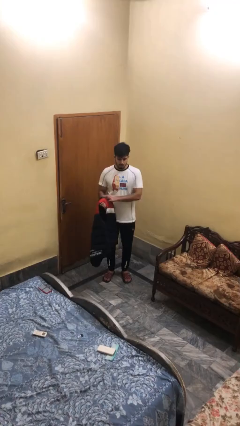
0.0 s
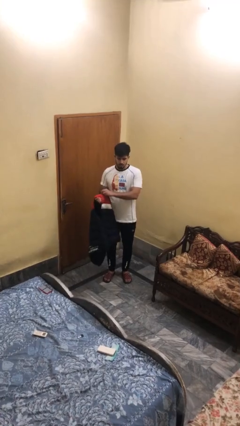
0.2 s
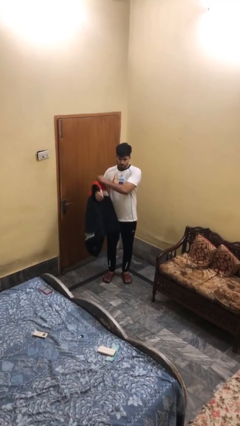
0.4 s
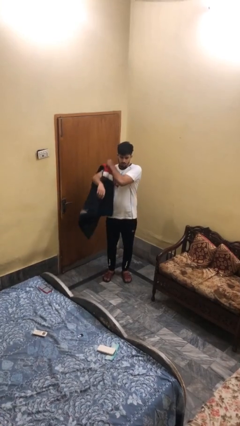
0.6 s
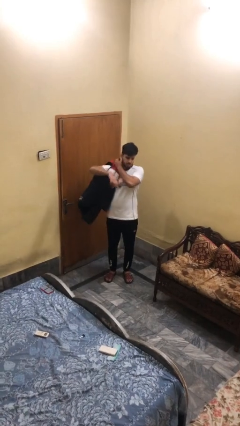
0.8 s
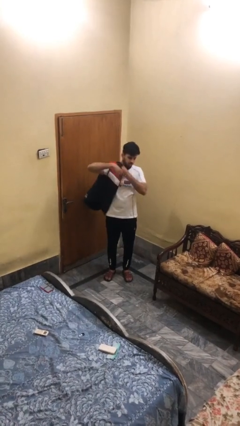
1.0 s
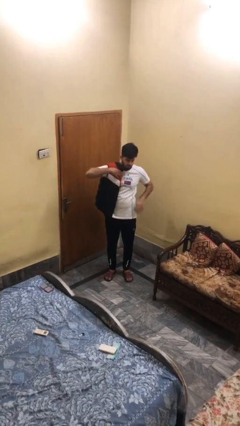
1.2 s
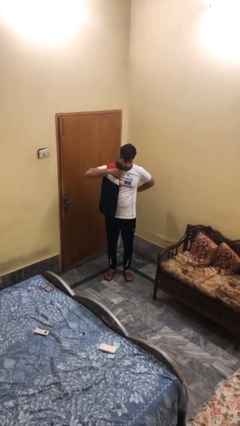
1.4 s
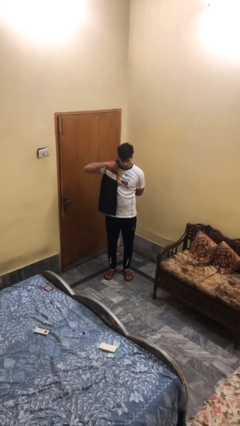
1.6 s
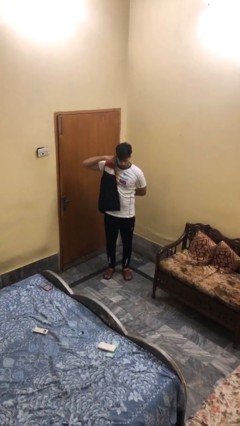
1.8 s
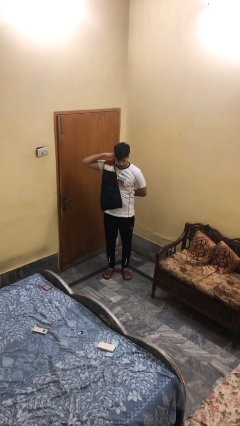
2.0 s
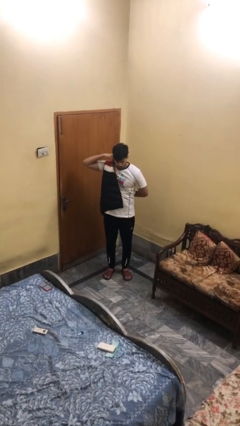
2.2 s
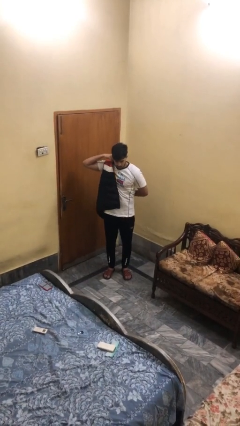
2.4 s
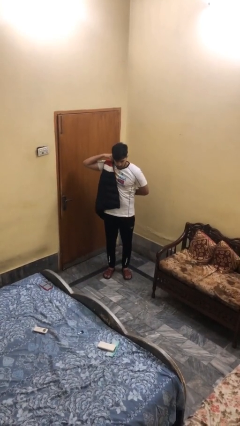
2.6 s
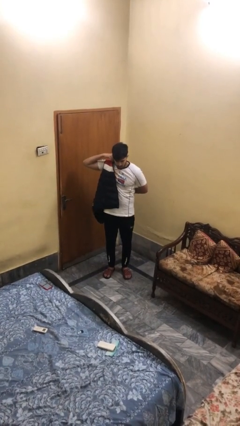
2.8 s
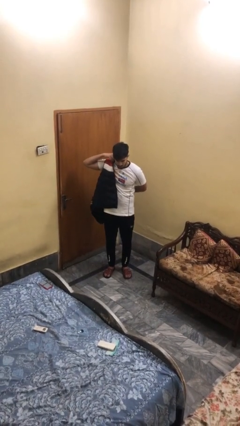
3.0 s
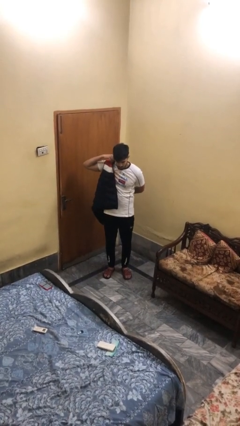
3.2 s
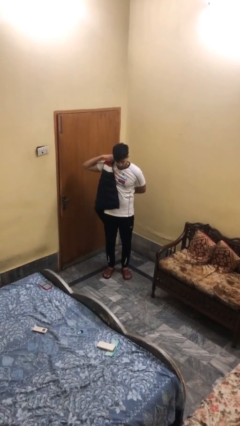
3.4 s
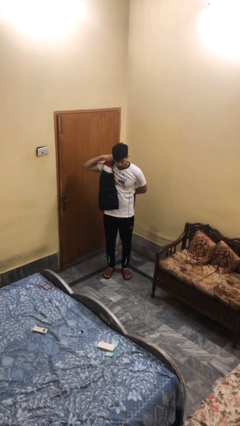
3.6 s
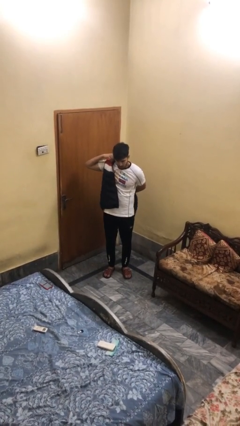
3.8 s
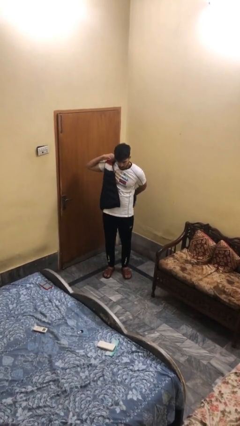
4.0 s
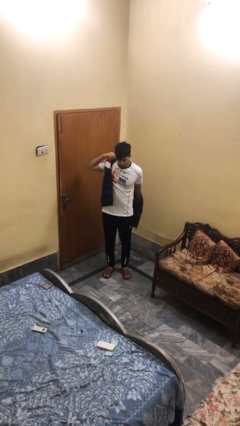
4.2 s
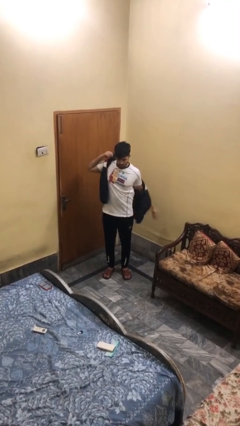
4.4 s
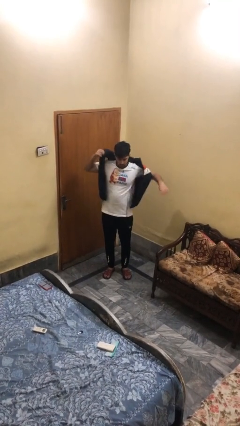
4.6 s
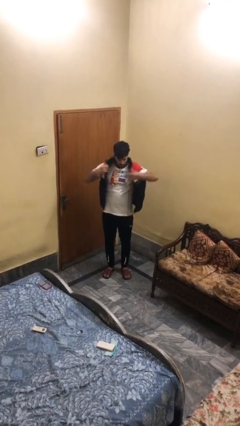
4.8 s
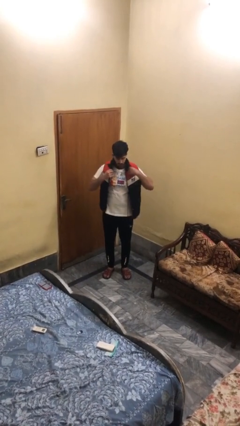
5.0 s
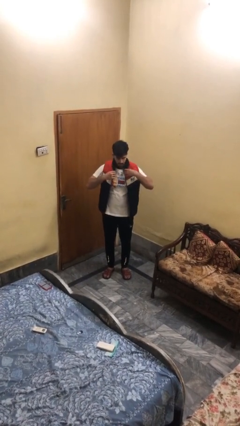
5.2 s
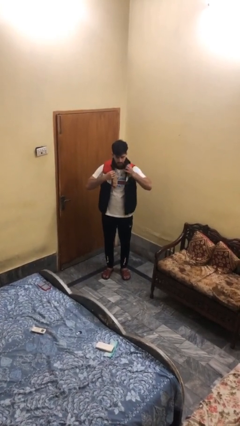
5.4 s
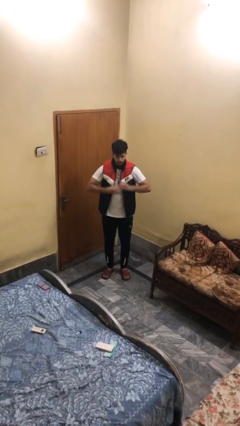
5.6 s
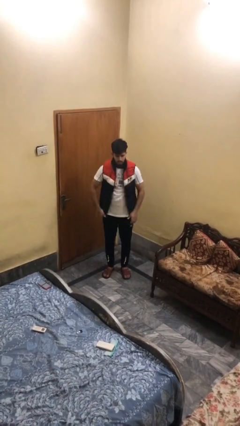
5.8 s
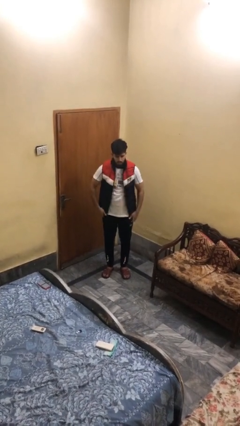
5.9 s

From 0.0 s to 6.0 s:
person puts on jacket

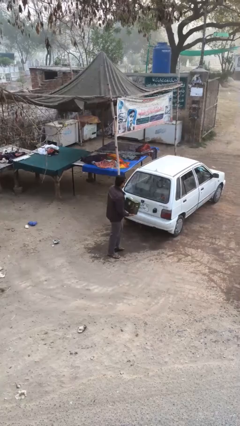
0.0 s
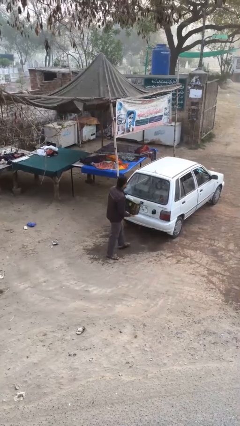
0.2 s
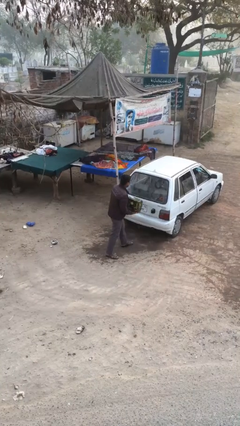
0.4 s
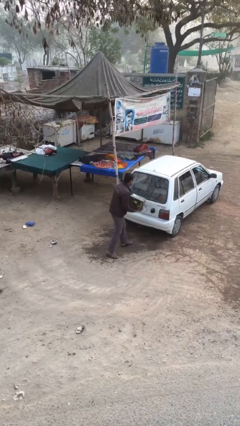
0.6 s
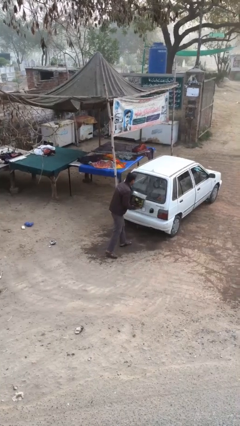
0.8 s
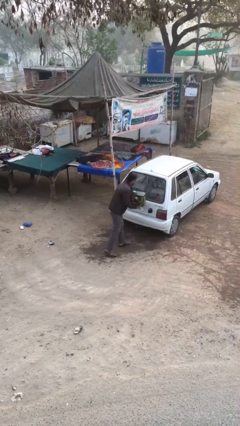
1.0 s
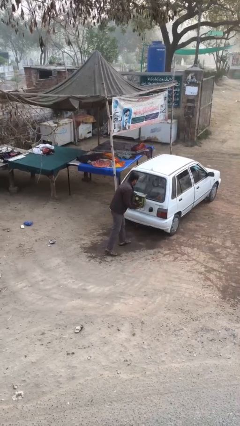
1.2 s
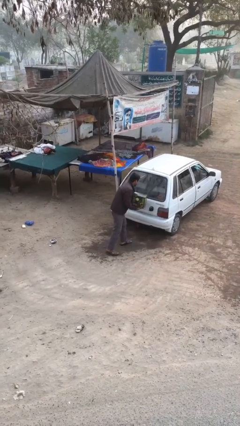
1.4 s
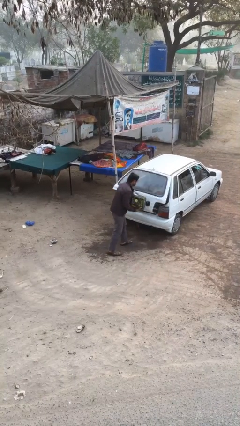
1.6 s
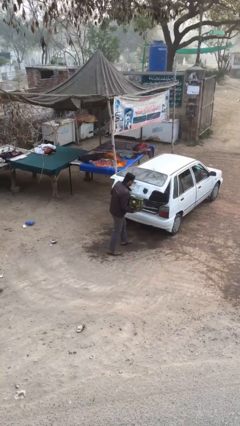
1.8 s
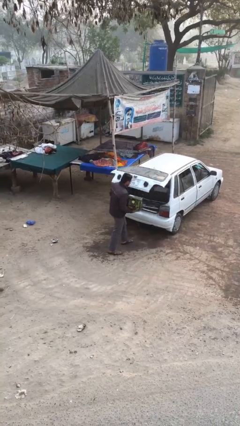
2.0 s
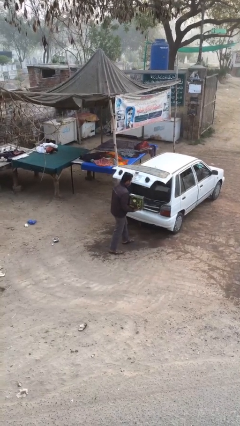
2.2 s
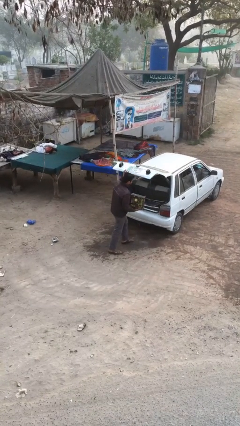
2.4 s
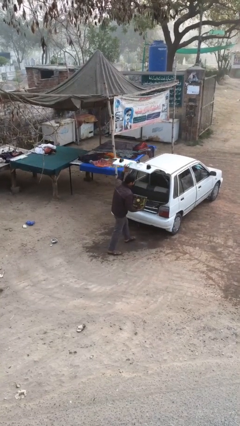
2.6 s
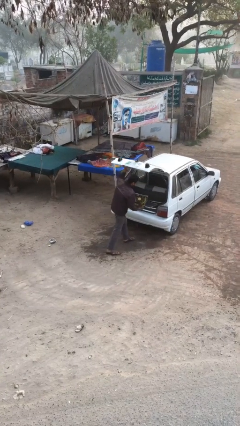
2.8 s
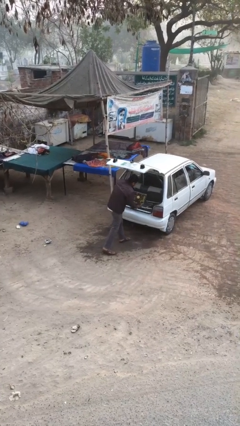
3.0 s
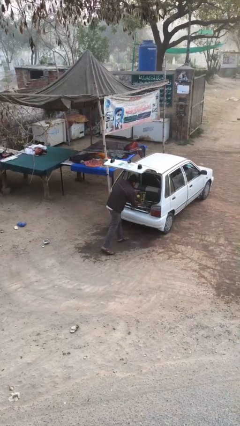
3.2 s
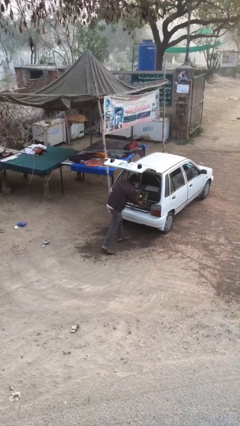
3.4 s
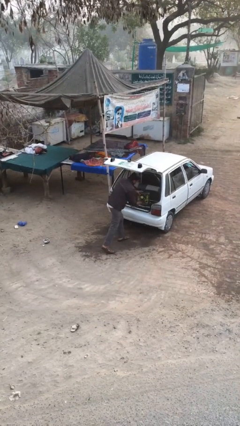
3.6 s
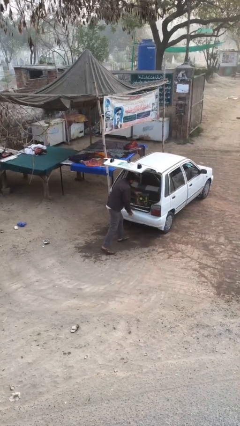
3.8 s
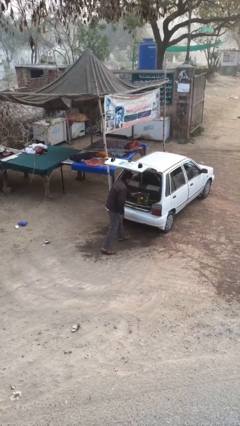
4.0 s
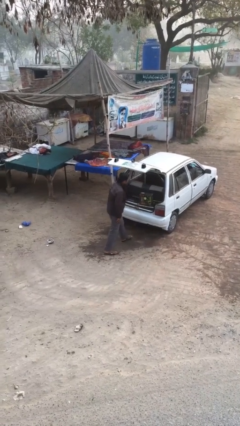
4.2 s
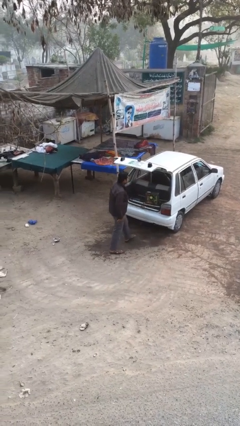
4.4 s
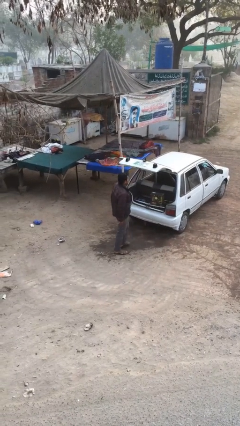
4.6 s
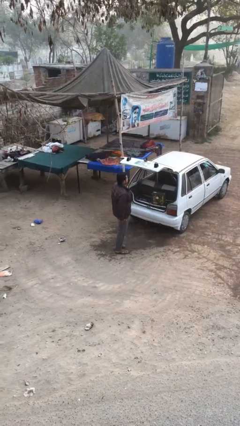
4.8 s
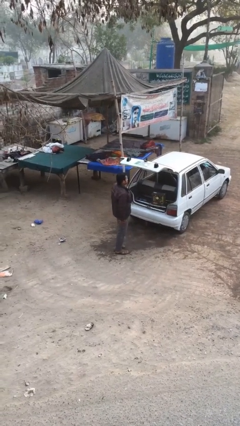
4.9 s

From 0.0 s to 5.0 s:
person loads car

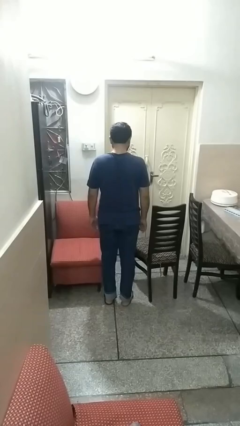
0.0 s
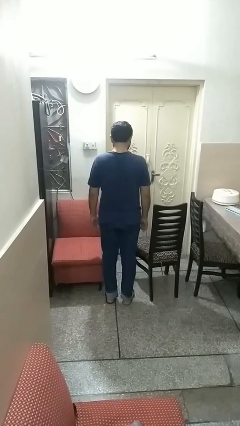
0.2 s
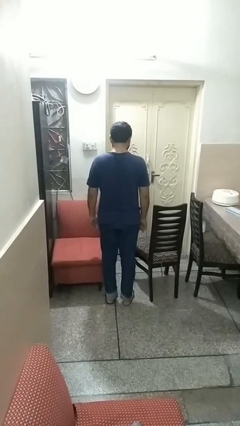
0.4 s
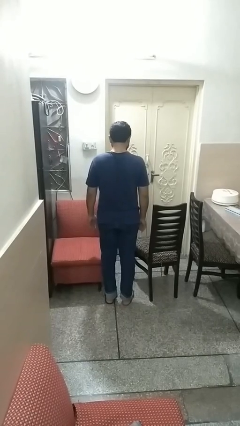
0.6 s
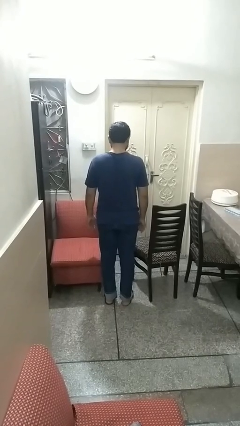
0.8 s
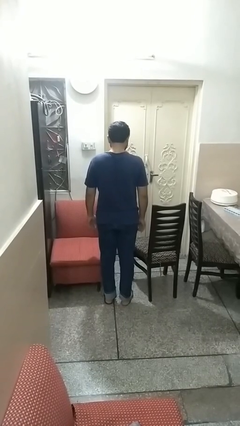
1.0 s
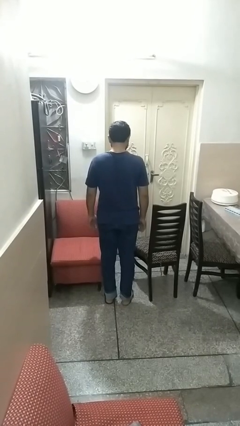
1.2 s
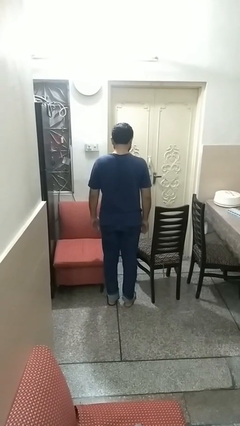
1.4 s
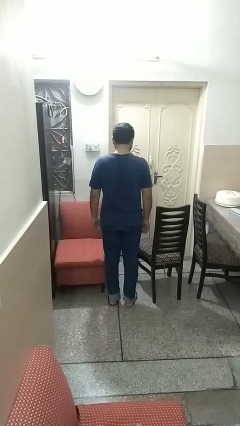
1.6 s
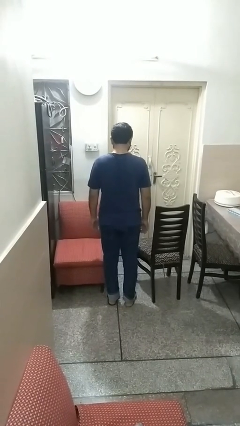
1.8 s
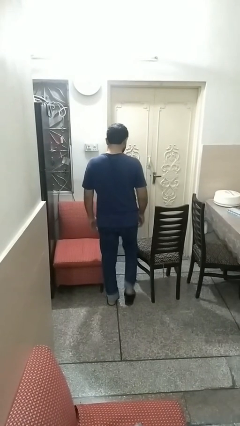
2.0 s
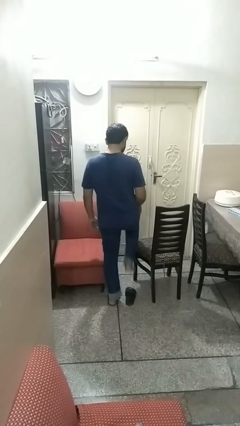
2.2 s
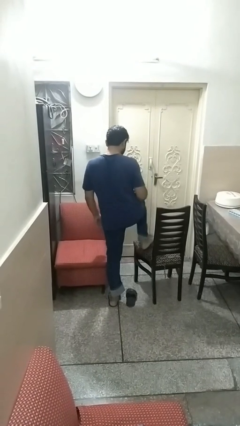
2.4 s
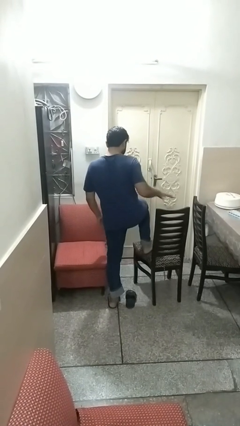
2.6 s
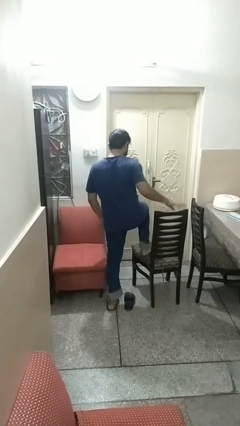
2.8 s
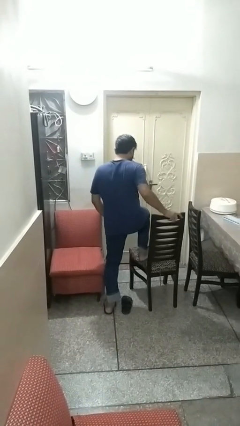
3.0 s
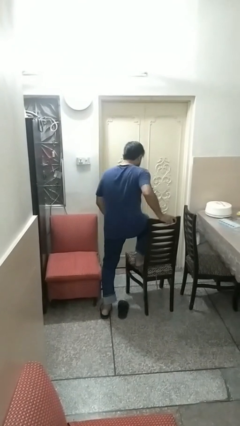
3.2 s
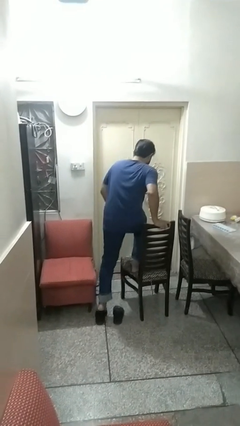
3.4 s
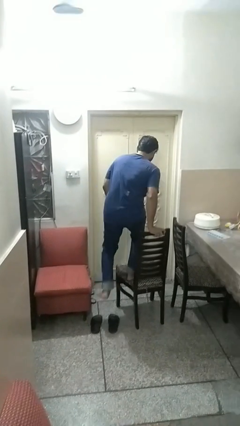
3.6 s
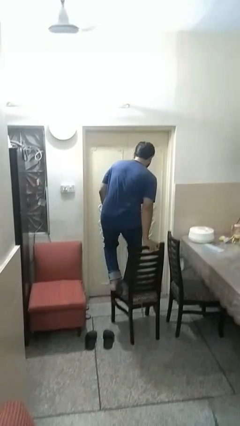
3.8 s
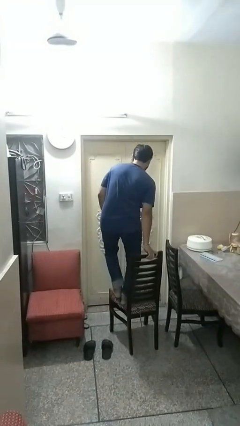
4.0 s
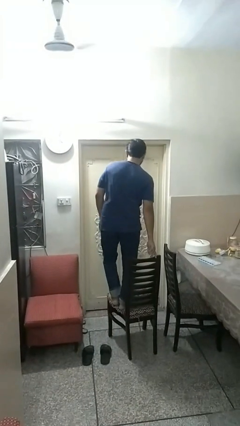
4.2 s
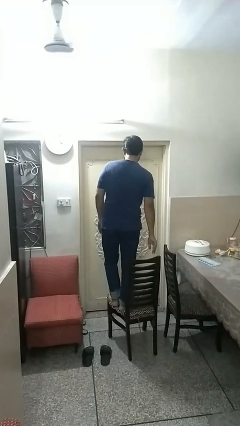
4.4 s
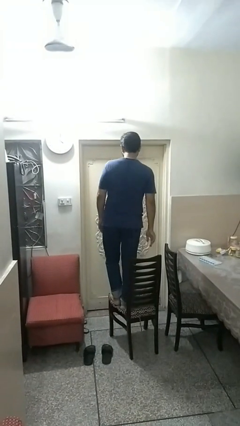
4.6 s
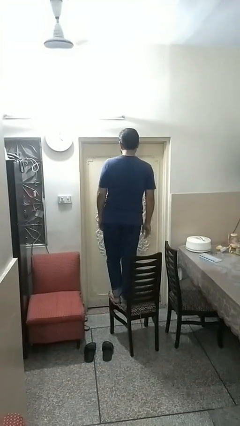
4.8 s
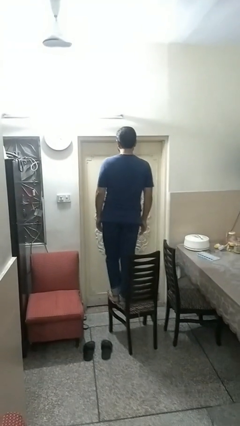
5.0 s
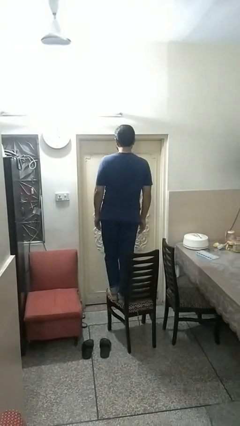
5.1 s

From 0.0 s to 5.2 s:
person climbs on chair

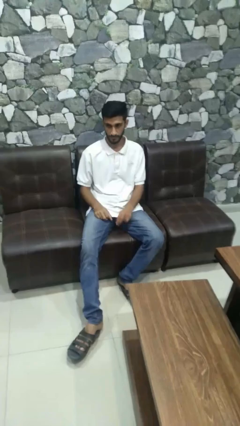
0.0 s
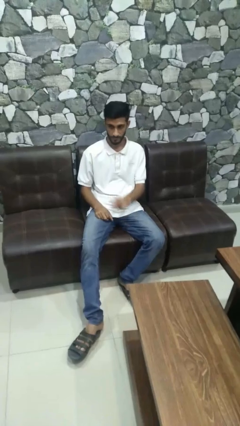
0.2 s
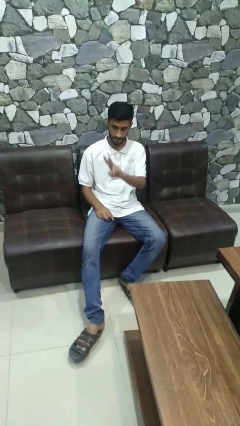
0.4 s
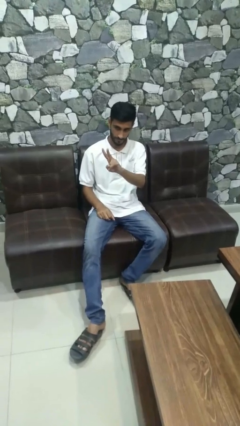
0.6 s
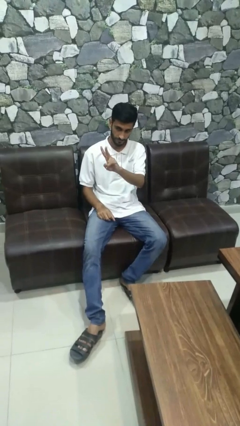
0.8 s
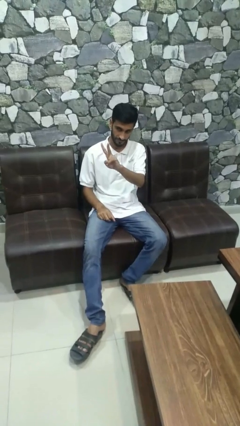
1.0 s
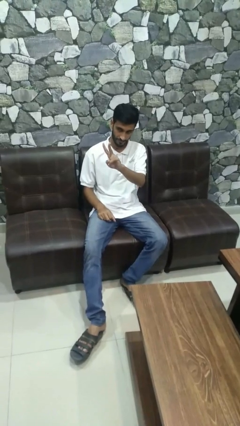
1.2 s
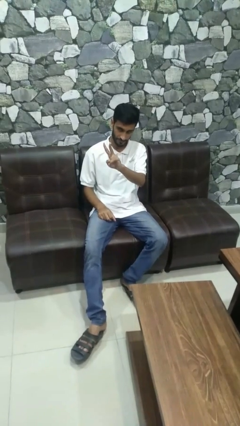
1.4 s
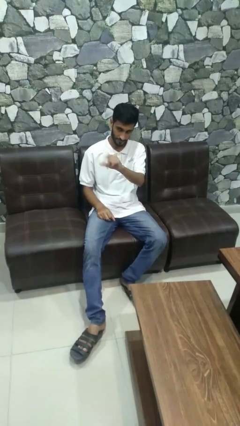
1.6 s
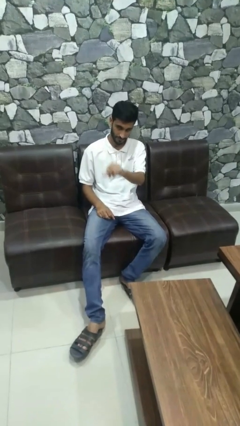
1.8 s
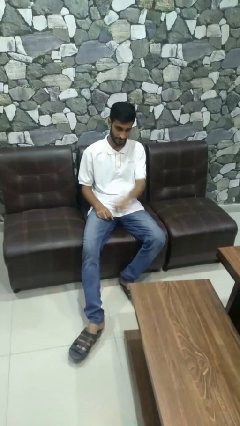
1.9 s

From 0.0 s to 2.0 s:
person gestures peace
